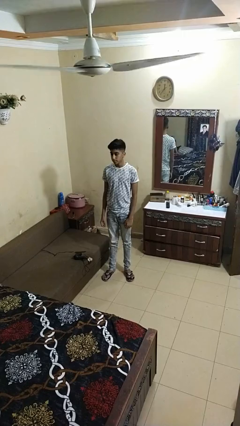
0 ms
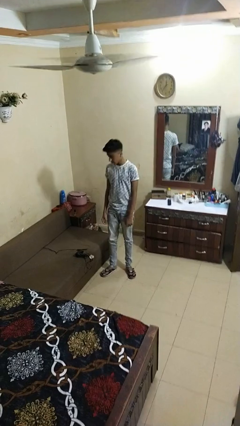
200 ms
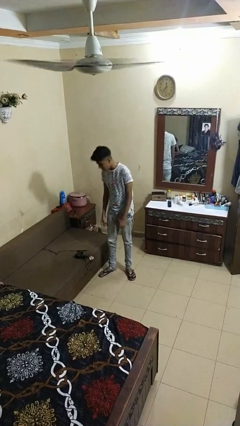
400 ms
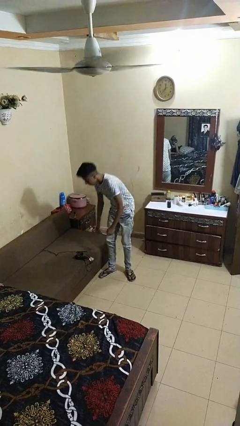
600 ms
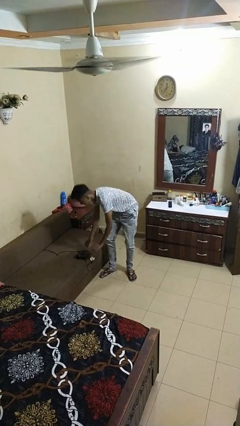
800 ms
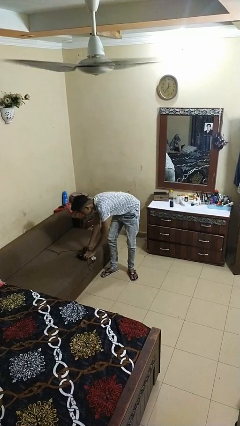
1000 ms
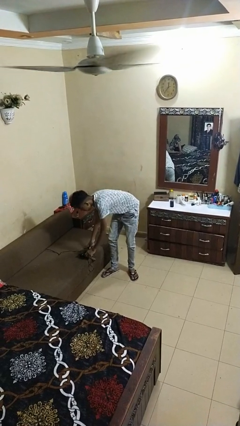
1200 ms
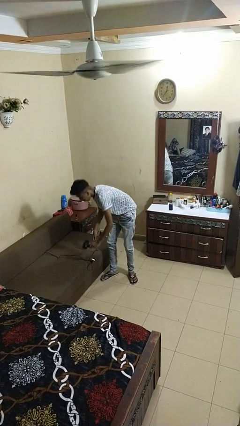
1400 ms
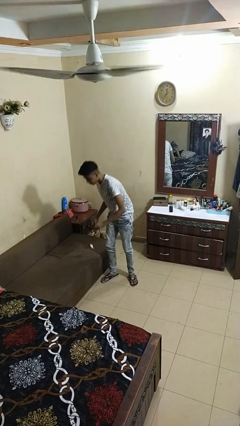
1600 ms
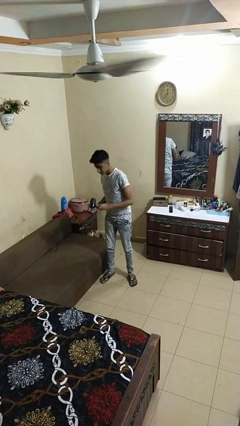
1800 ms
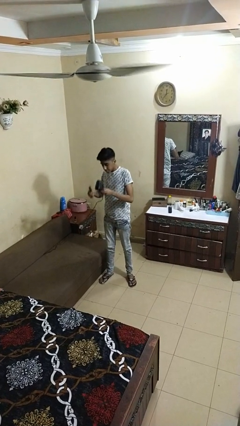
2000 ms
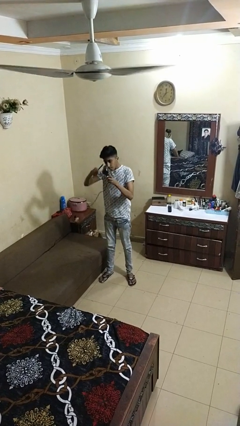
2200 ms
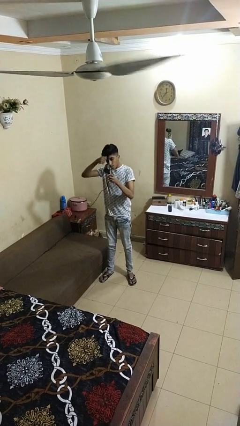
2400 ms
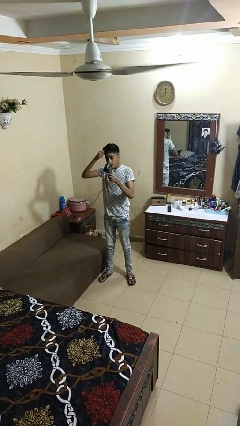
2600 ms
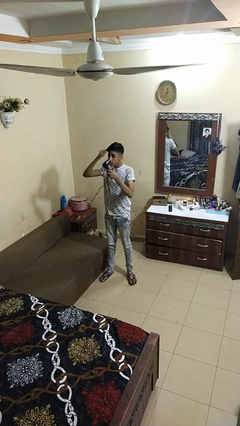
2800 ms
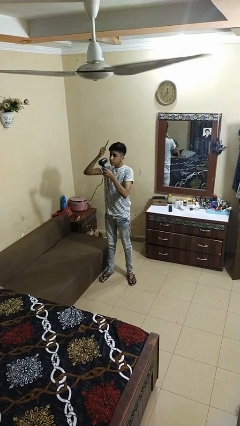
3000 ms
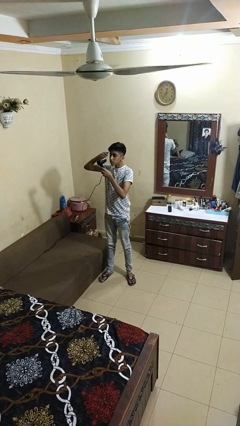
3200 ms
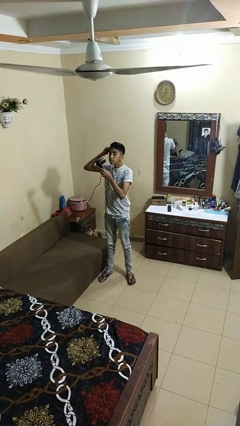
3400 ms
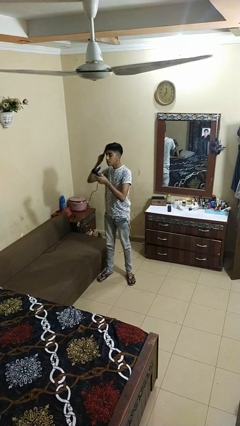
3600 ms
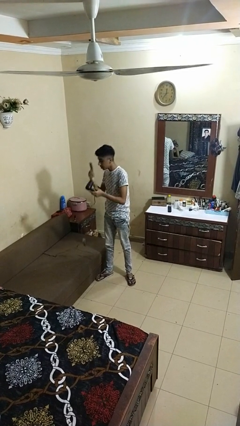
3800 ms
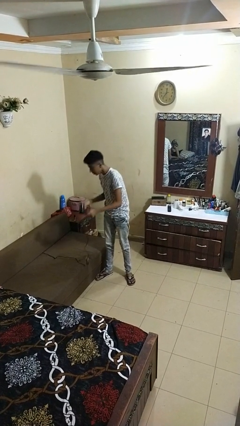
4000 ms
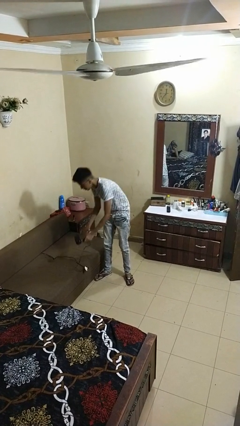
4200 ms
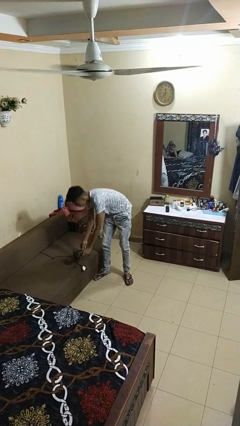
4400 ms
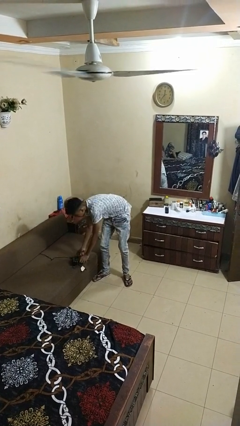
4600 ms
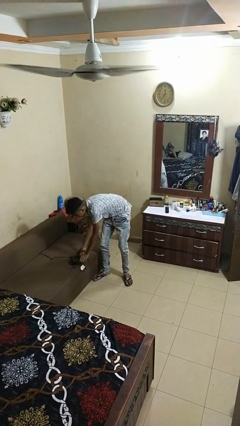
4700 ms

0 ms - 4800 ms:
person dries hair with hairdryer

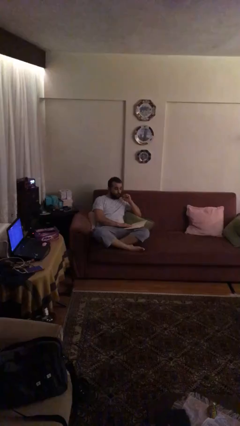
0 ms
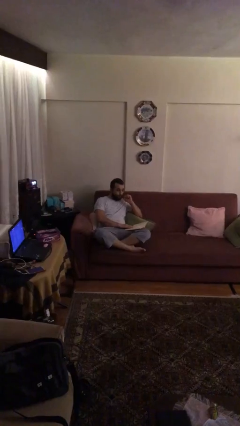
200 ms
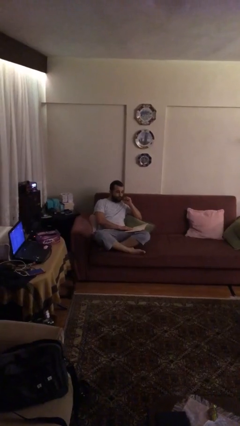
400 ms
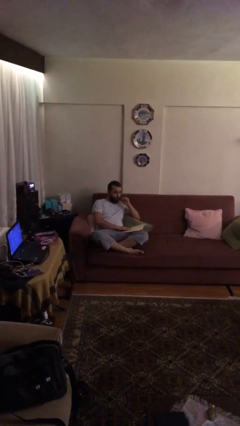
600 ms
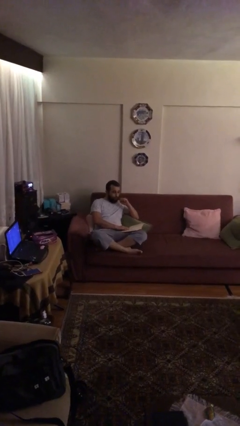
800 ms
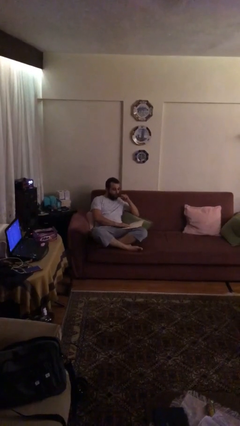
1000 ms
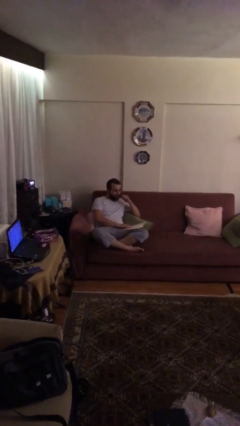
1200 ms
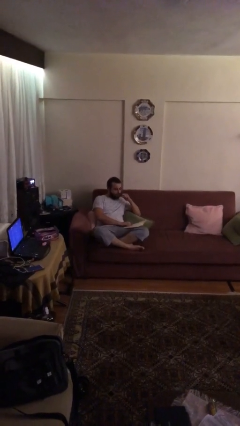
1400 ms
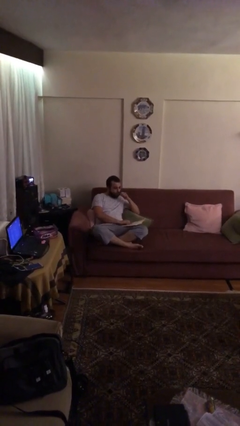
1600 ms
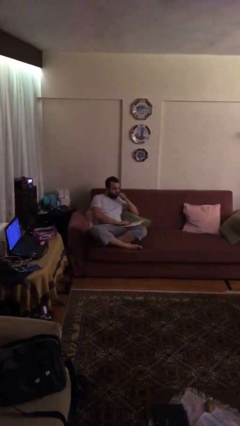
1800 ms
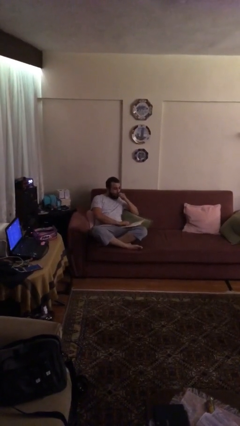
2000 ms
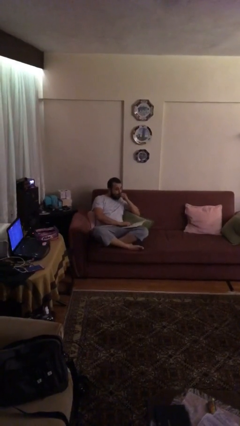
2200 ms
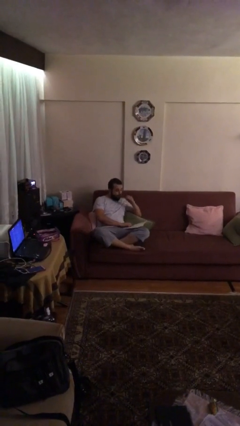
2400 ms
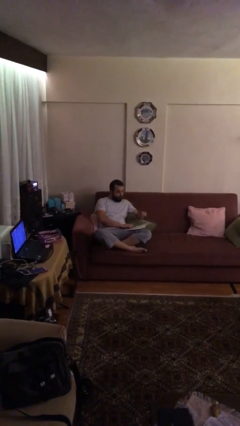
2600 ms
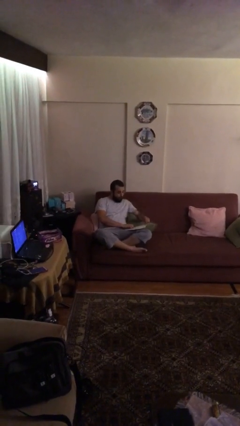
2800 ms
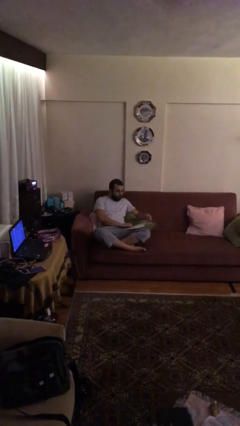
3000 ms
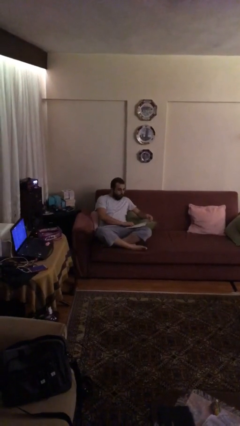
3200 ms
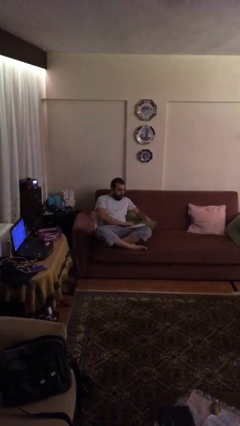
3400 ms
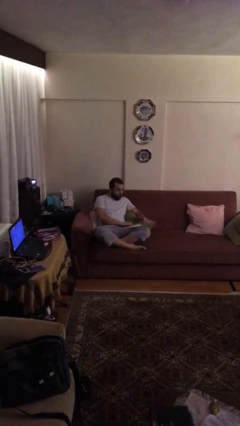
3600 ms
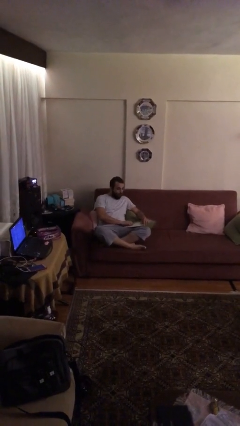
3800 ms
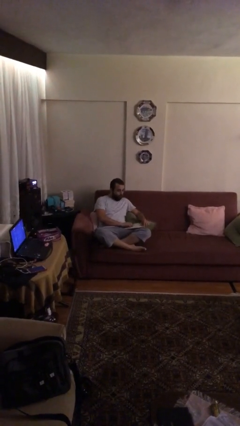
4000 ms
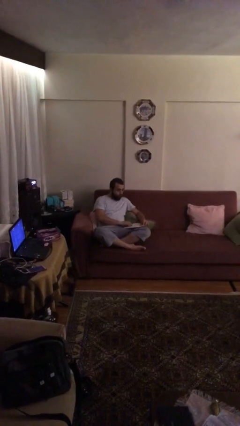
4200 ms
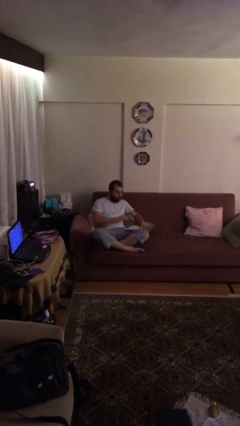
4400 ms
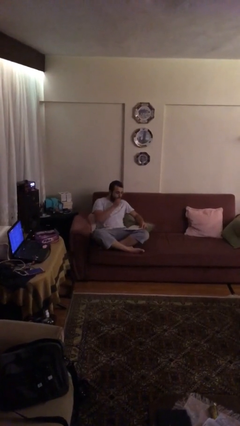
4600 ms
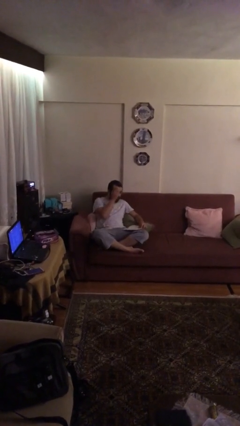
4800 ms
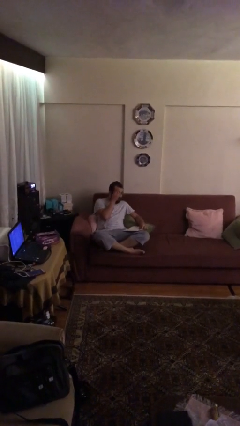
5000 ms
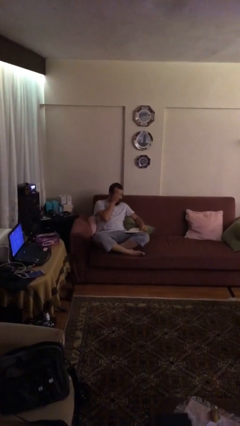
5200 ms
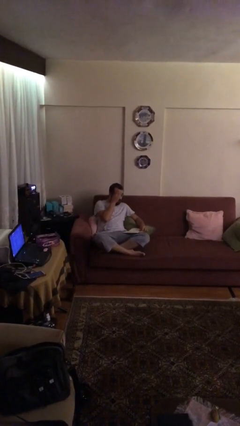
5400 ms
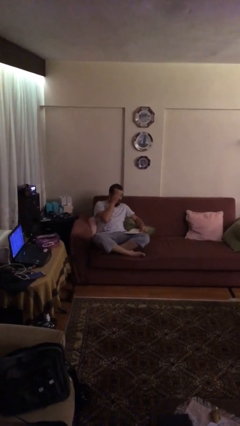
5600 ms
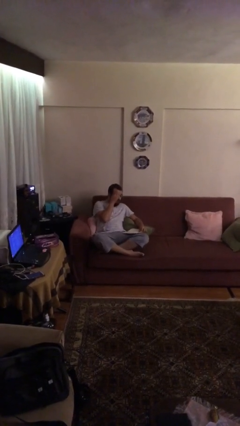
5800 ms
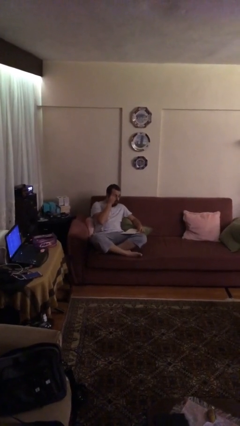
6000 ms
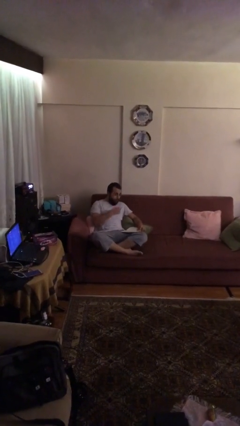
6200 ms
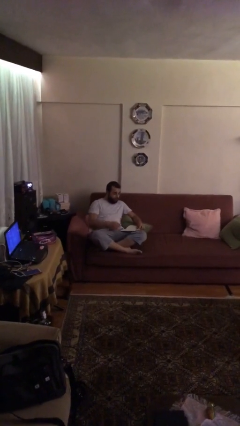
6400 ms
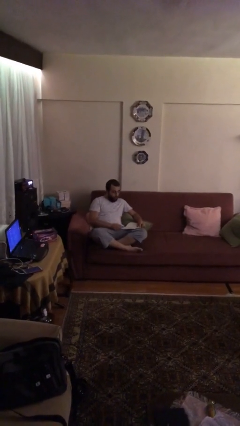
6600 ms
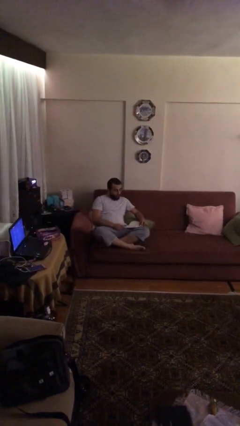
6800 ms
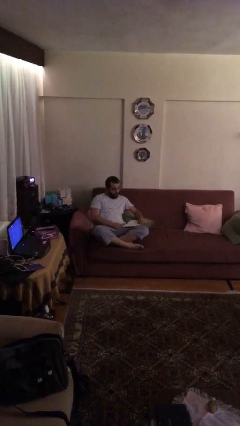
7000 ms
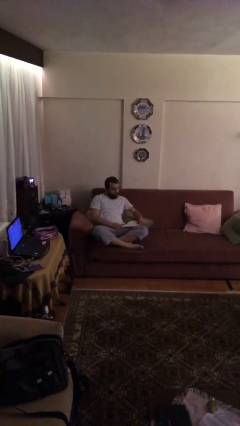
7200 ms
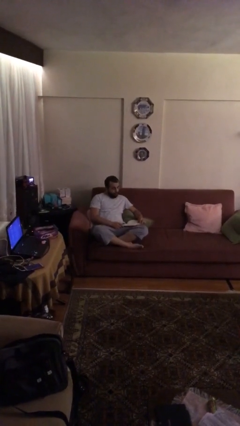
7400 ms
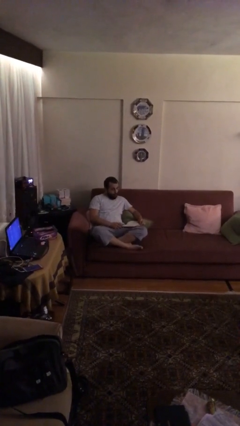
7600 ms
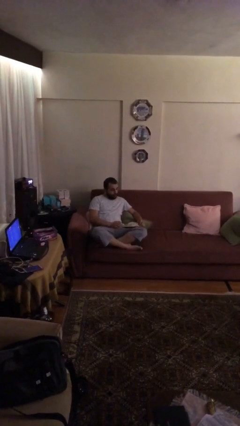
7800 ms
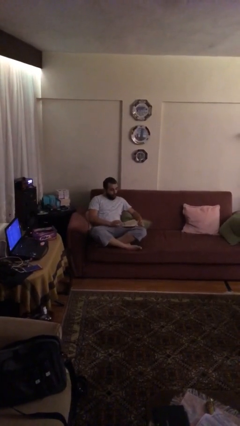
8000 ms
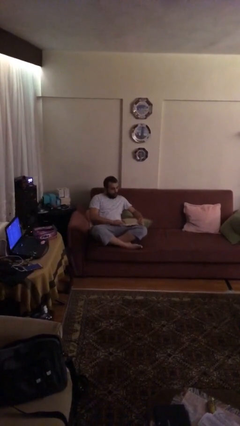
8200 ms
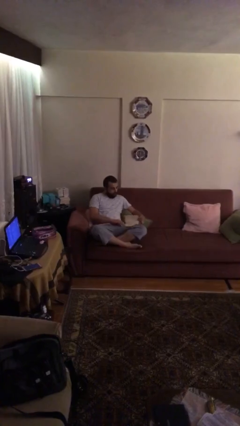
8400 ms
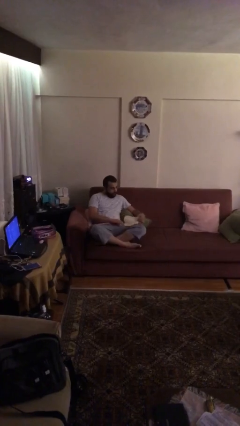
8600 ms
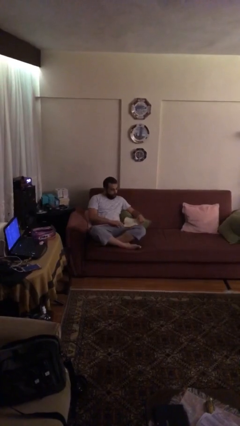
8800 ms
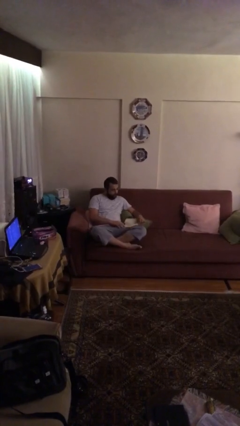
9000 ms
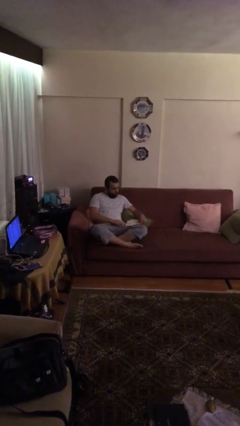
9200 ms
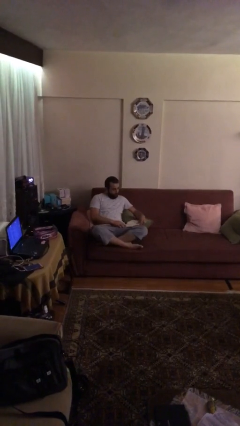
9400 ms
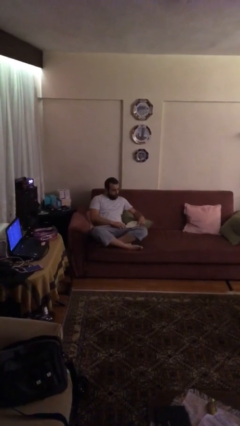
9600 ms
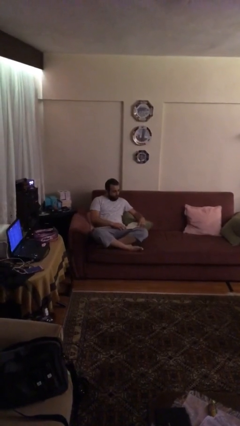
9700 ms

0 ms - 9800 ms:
person reads document

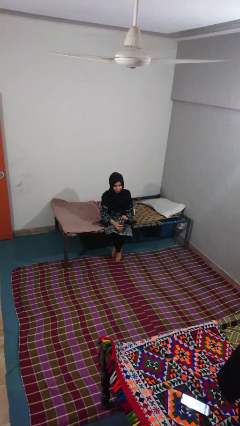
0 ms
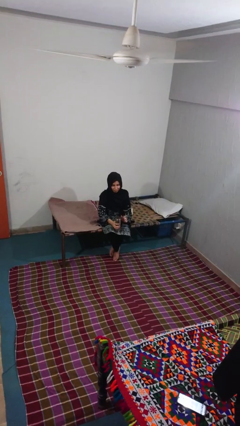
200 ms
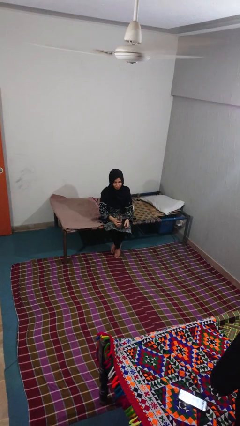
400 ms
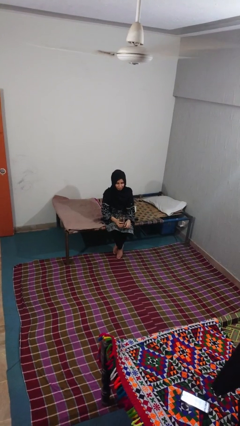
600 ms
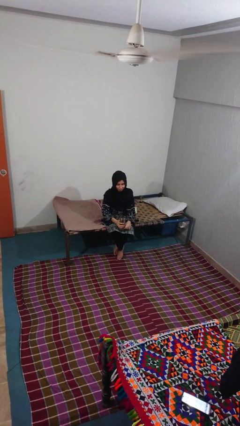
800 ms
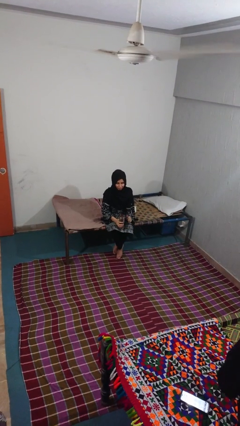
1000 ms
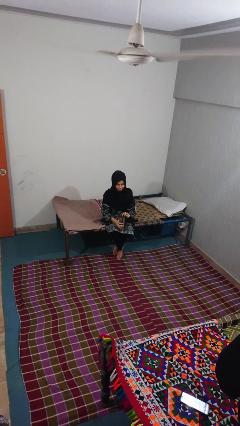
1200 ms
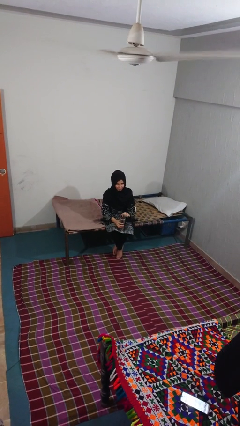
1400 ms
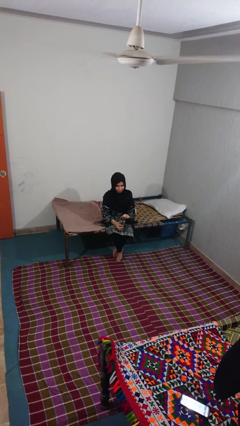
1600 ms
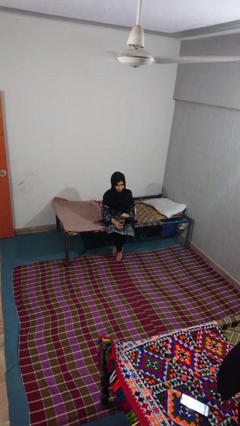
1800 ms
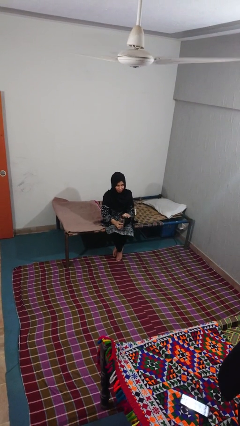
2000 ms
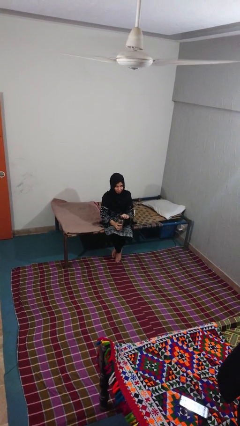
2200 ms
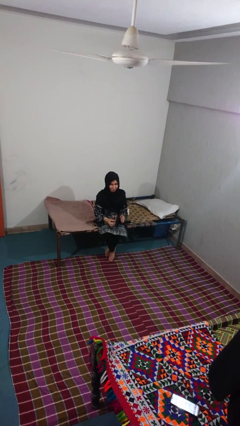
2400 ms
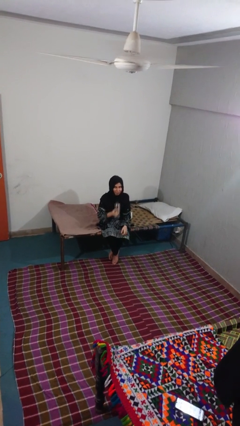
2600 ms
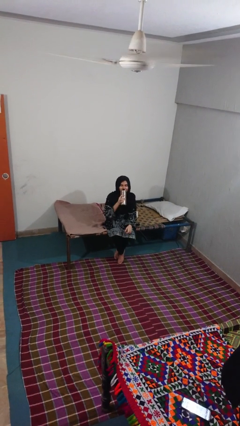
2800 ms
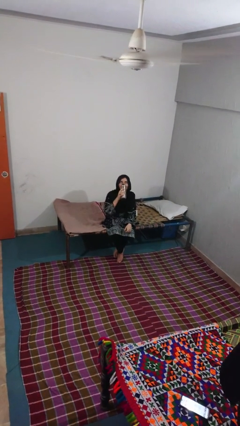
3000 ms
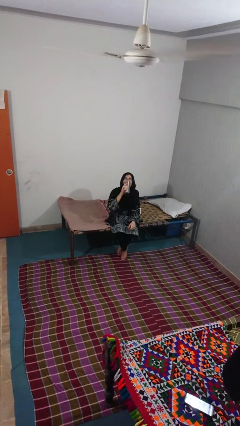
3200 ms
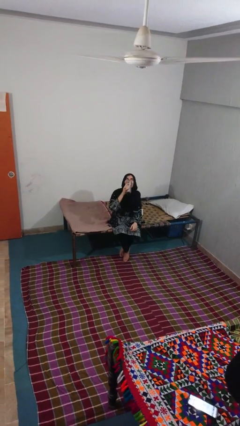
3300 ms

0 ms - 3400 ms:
person opens beverage can
